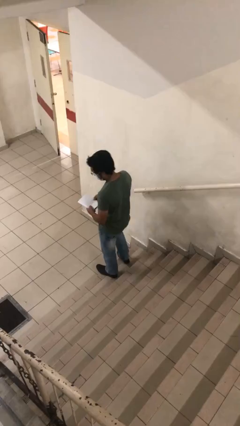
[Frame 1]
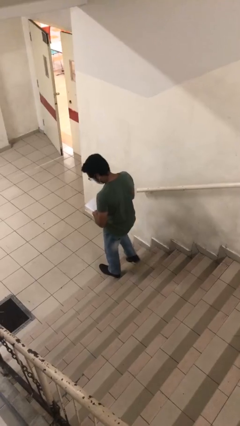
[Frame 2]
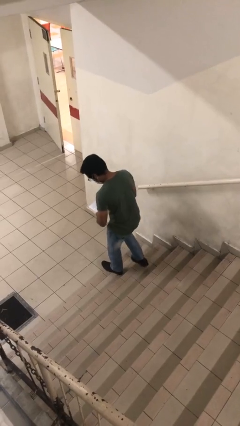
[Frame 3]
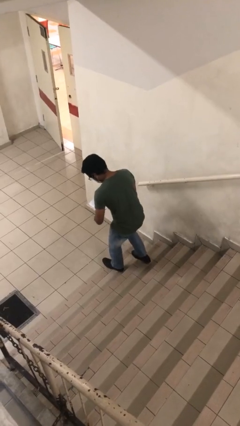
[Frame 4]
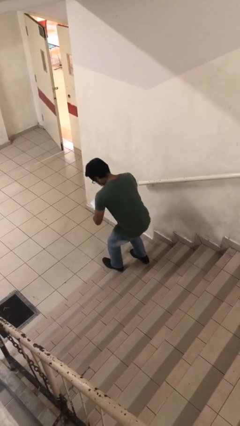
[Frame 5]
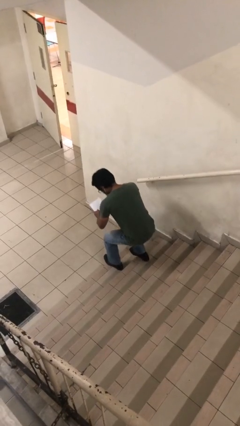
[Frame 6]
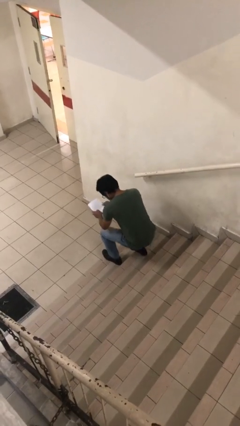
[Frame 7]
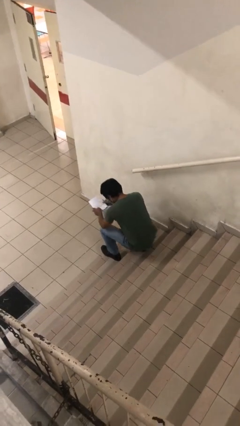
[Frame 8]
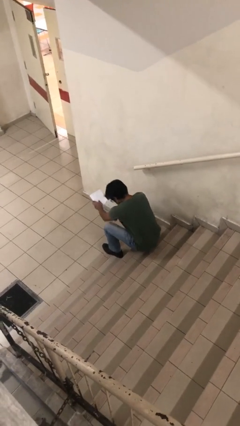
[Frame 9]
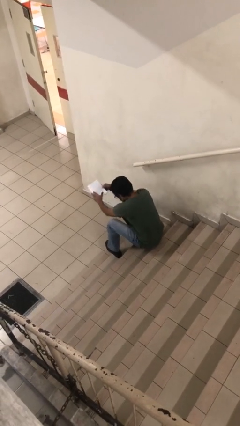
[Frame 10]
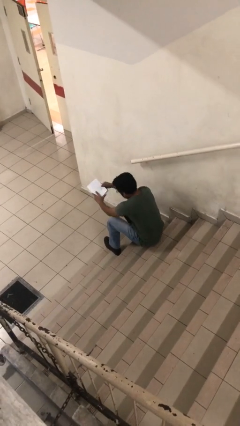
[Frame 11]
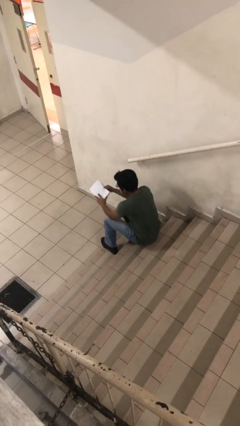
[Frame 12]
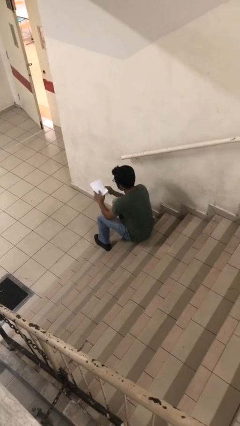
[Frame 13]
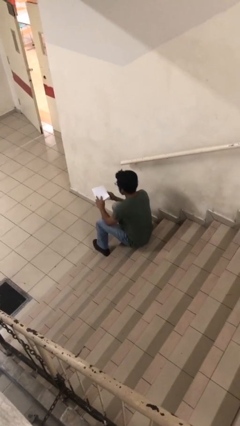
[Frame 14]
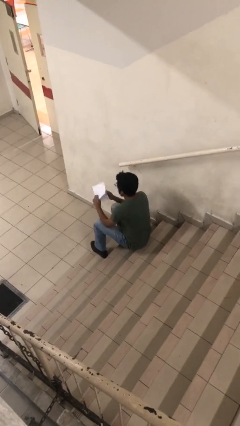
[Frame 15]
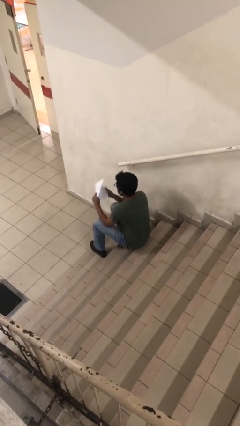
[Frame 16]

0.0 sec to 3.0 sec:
person sits down

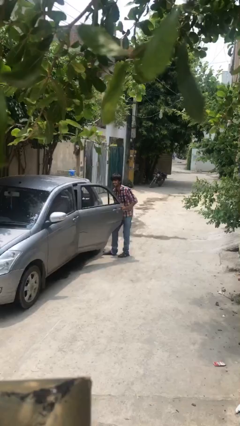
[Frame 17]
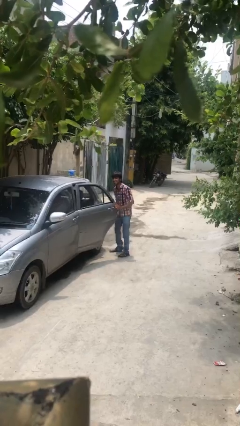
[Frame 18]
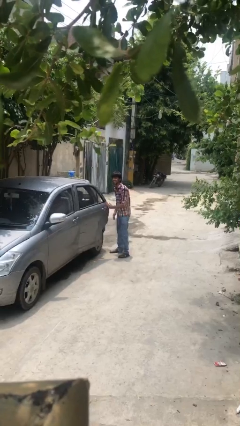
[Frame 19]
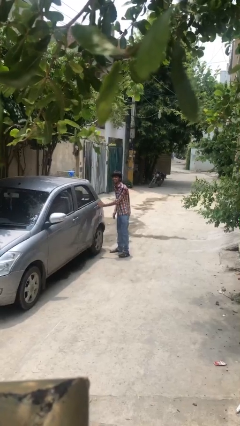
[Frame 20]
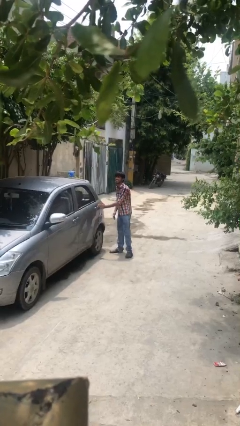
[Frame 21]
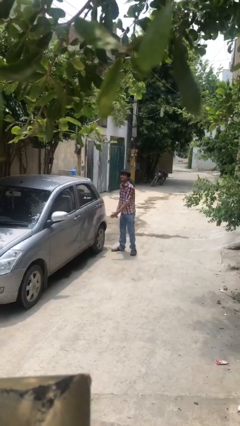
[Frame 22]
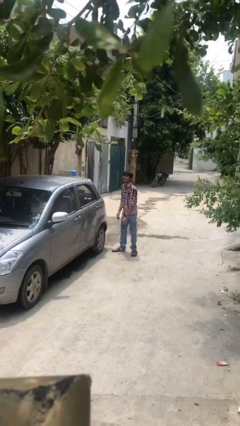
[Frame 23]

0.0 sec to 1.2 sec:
person closes car door

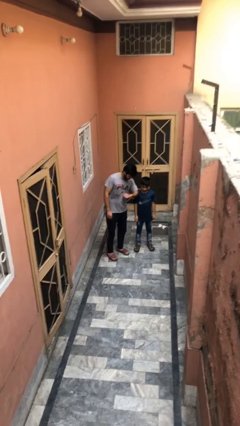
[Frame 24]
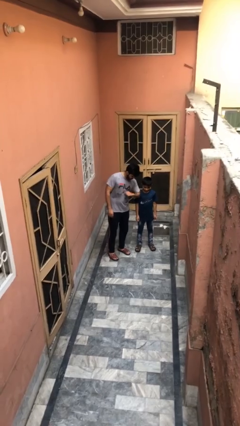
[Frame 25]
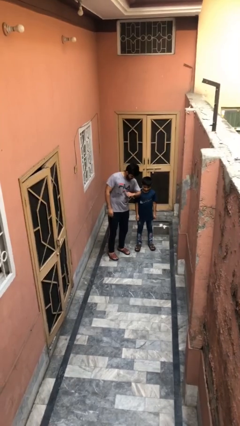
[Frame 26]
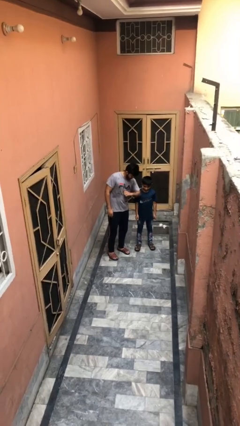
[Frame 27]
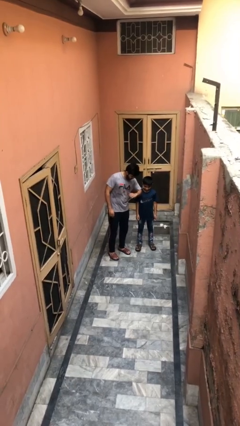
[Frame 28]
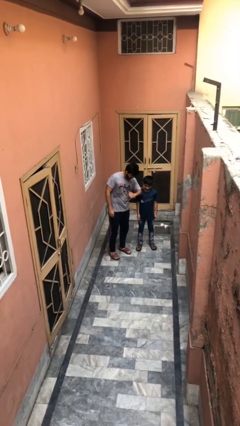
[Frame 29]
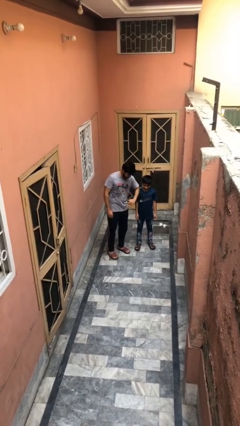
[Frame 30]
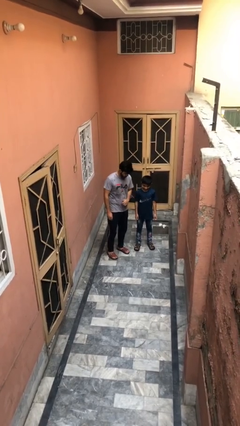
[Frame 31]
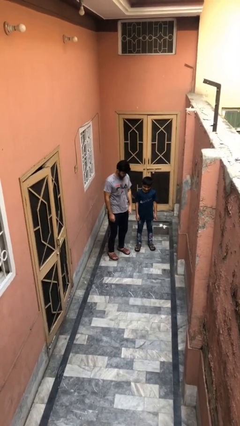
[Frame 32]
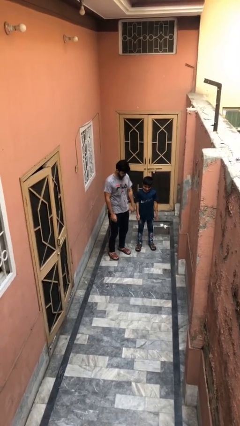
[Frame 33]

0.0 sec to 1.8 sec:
person nudges person with elbow

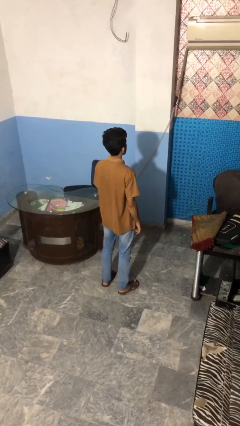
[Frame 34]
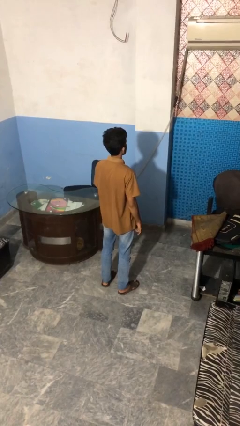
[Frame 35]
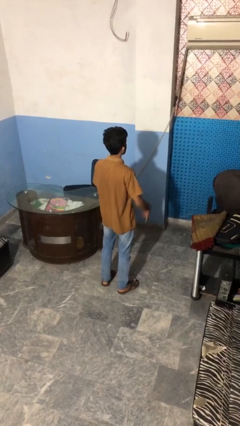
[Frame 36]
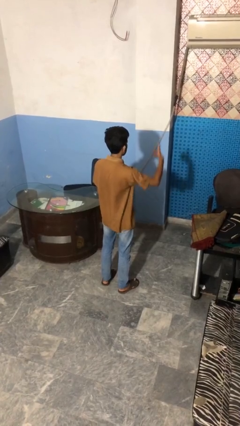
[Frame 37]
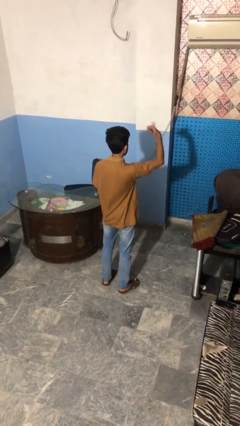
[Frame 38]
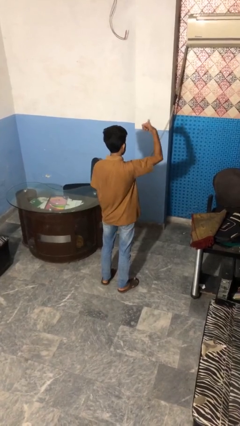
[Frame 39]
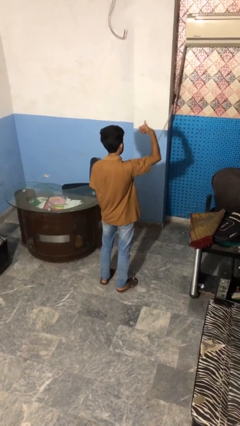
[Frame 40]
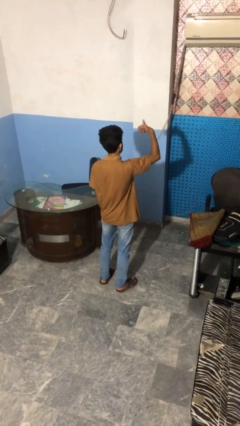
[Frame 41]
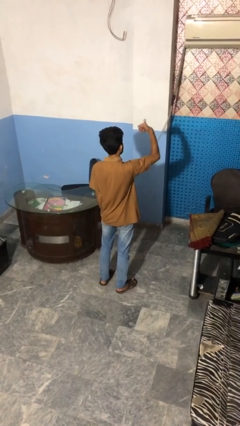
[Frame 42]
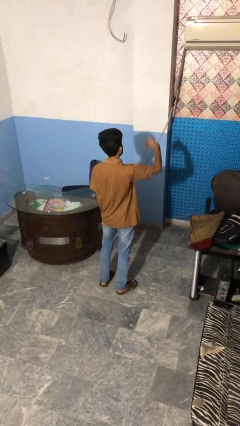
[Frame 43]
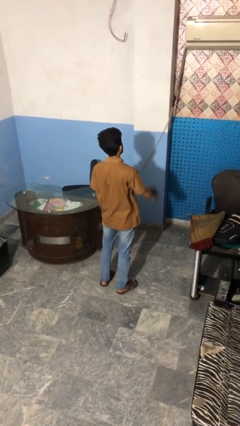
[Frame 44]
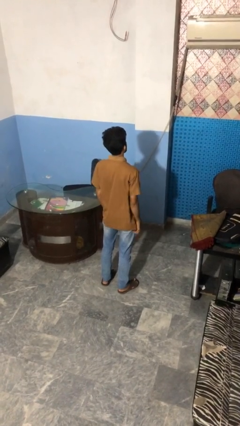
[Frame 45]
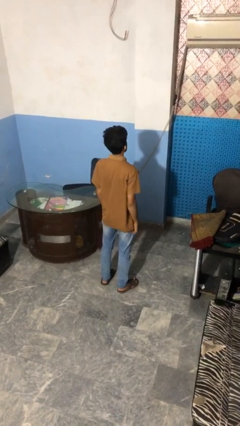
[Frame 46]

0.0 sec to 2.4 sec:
person gestures hang loose

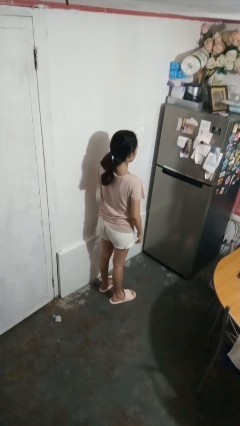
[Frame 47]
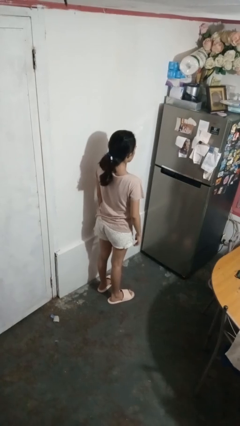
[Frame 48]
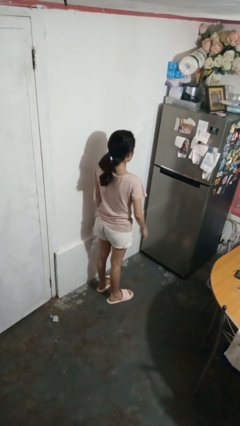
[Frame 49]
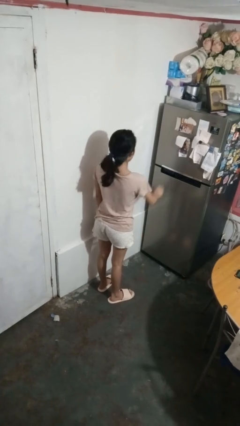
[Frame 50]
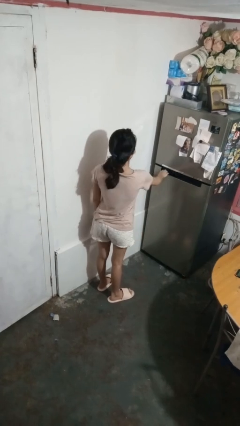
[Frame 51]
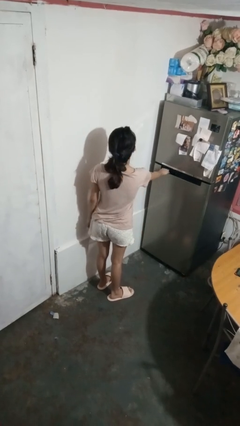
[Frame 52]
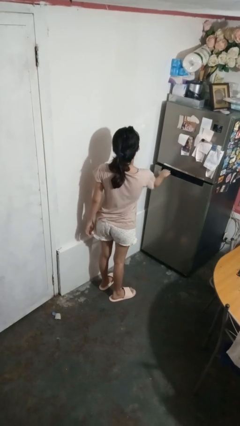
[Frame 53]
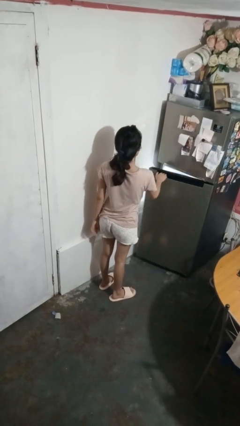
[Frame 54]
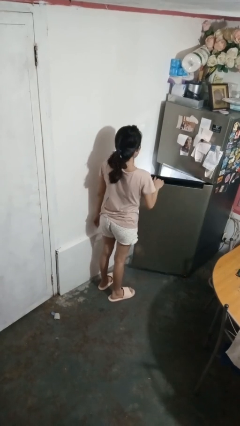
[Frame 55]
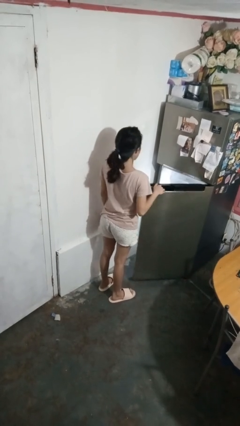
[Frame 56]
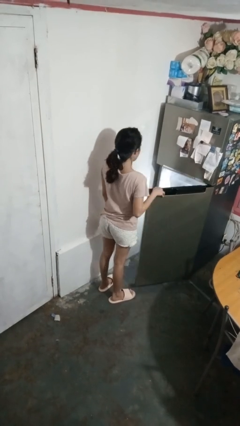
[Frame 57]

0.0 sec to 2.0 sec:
person opens refrigerator

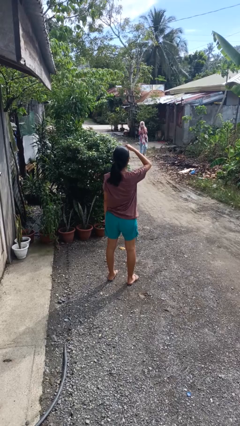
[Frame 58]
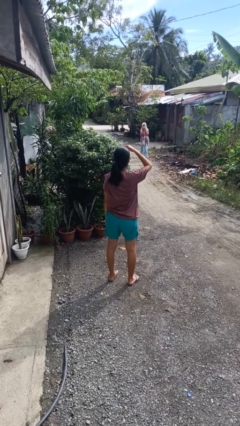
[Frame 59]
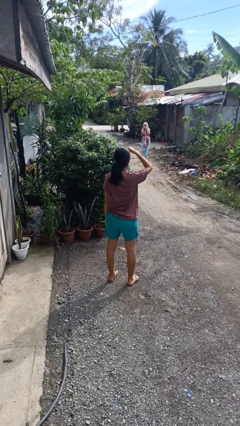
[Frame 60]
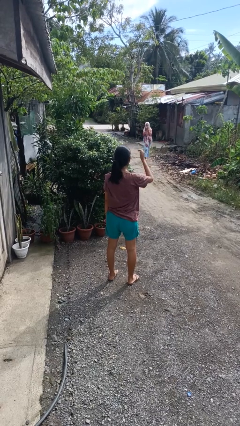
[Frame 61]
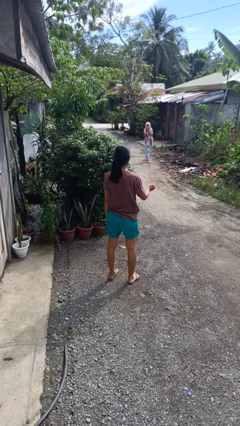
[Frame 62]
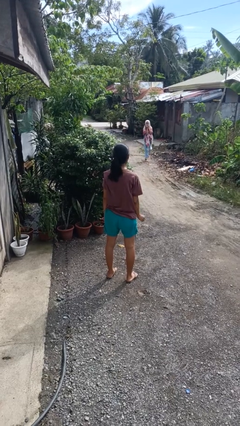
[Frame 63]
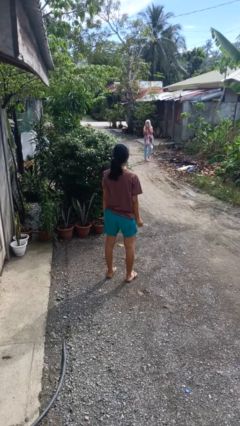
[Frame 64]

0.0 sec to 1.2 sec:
person shades eyes

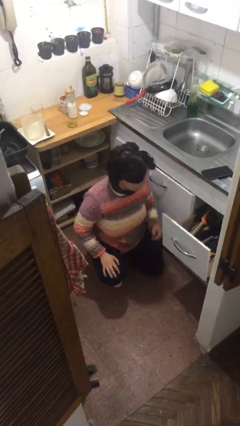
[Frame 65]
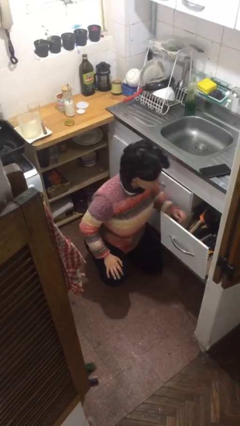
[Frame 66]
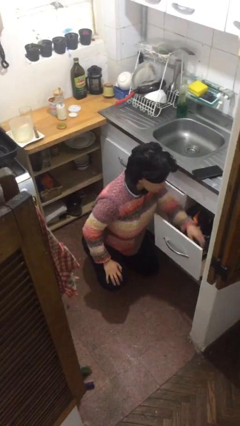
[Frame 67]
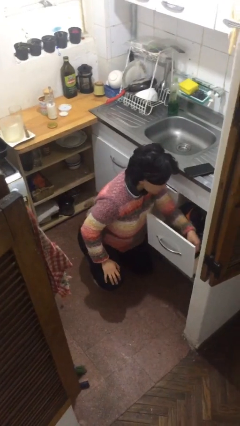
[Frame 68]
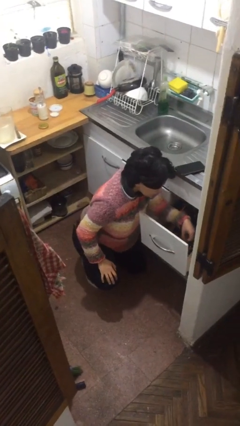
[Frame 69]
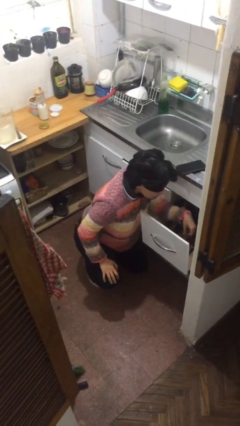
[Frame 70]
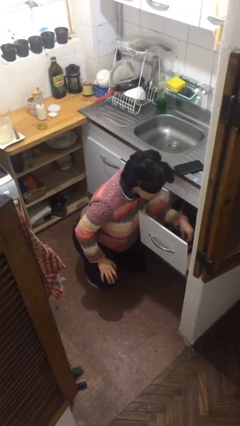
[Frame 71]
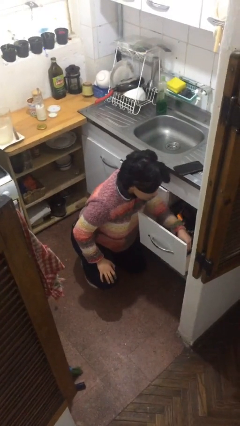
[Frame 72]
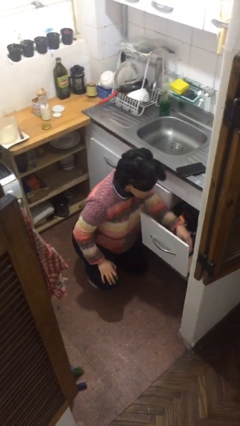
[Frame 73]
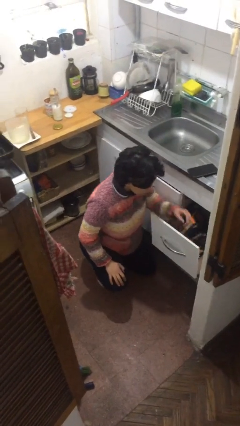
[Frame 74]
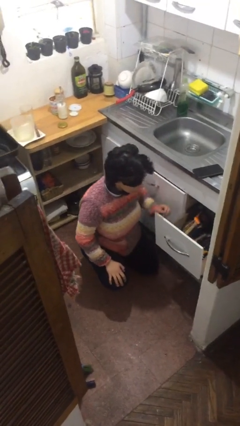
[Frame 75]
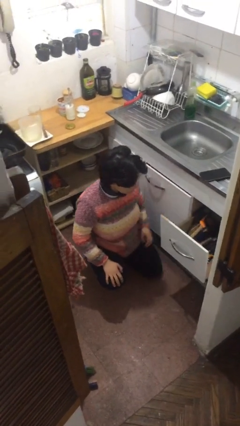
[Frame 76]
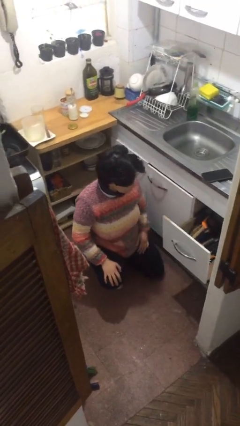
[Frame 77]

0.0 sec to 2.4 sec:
person searches in kitchen drawer

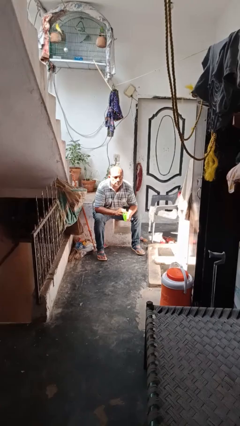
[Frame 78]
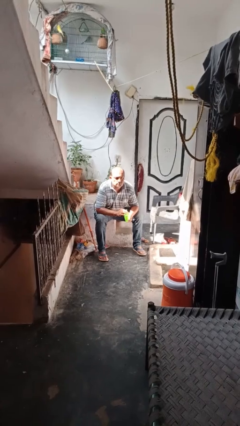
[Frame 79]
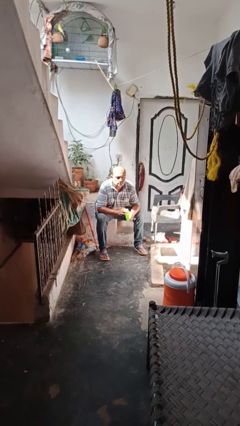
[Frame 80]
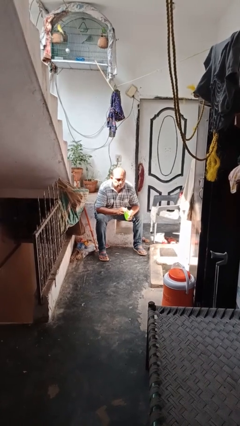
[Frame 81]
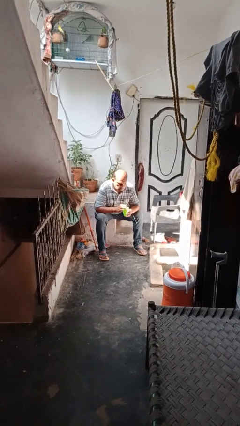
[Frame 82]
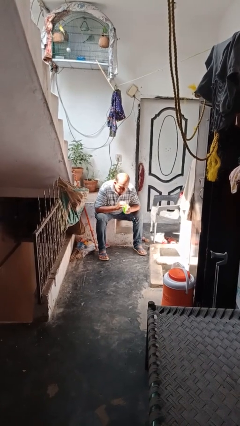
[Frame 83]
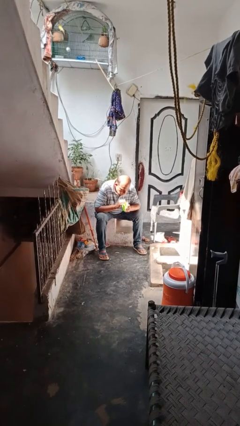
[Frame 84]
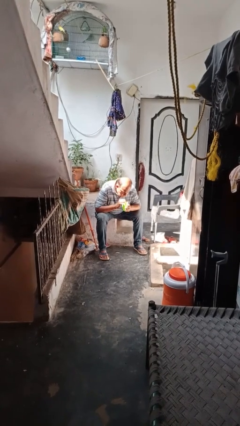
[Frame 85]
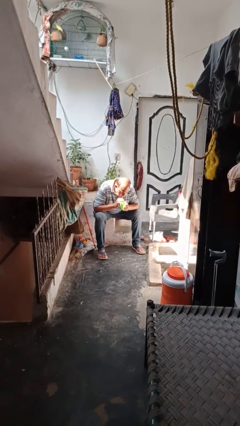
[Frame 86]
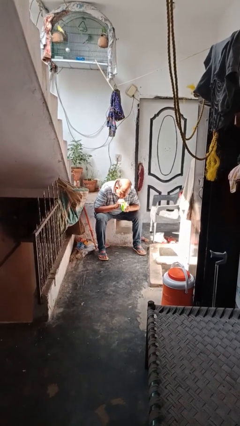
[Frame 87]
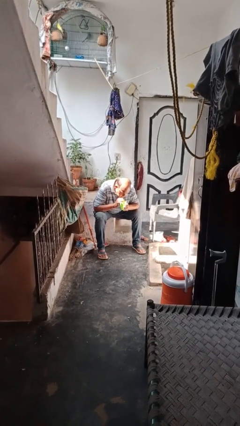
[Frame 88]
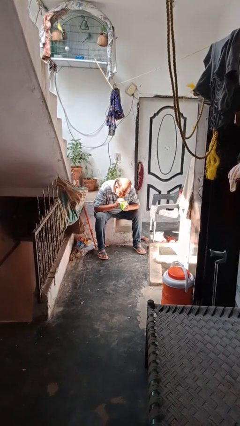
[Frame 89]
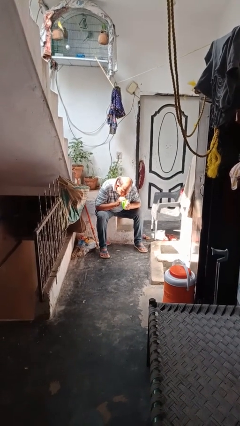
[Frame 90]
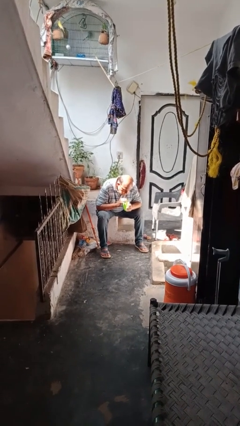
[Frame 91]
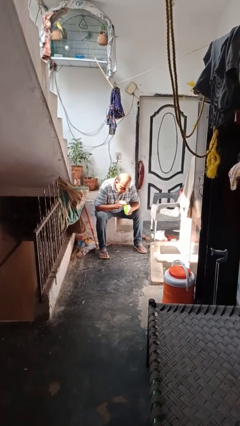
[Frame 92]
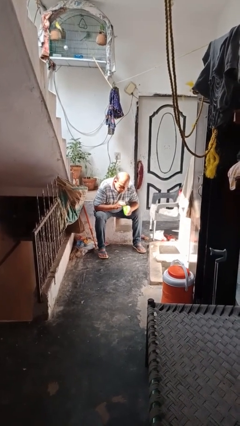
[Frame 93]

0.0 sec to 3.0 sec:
person drinks from straw
